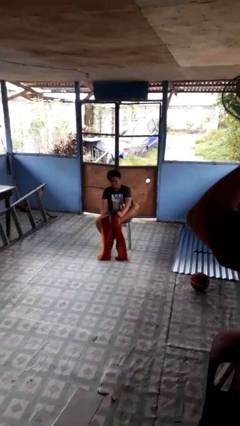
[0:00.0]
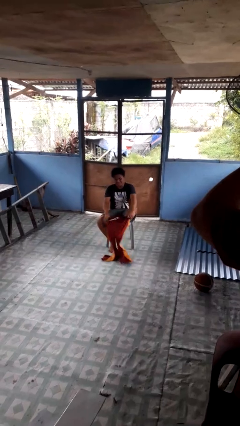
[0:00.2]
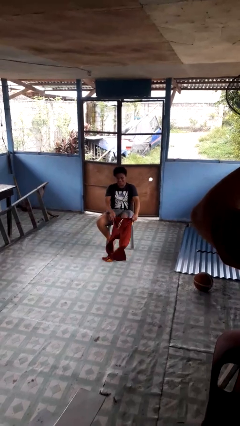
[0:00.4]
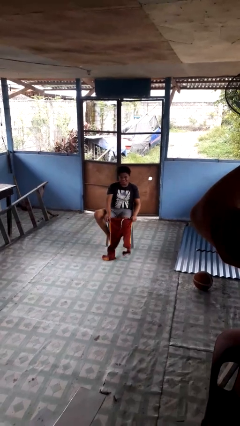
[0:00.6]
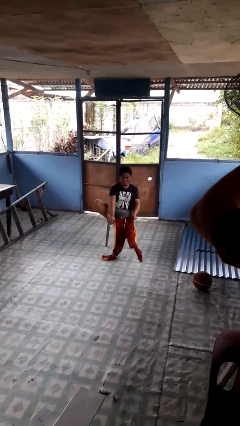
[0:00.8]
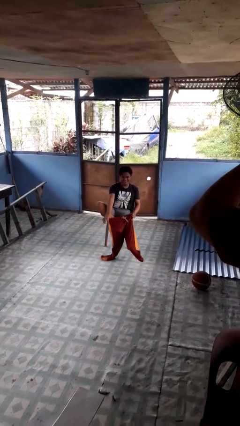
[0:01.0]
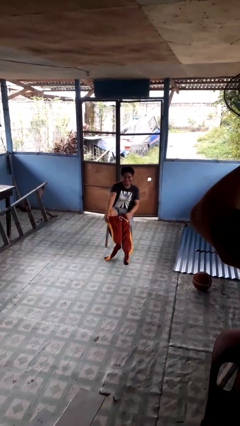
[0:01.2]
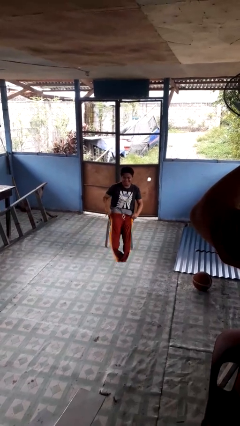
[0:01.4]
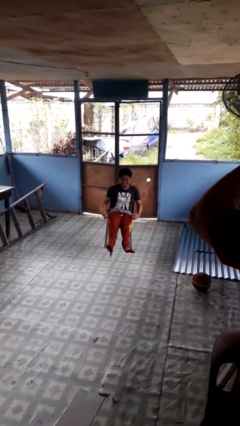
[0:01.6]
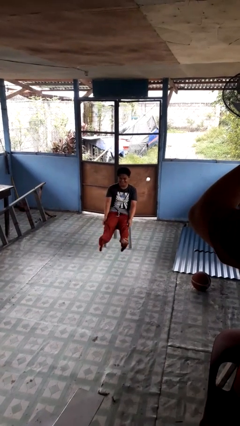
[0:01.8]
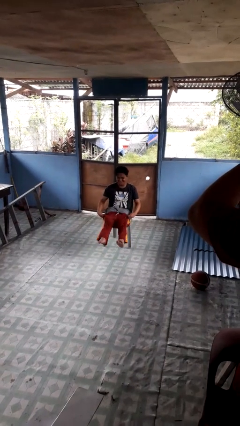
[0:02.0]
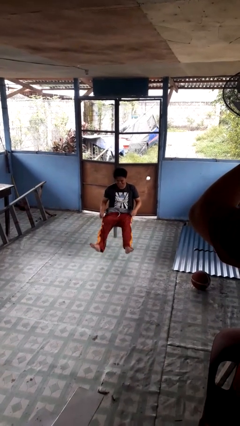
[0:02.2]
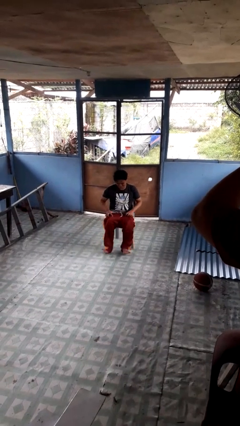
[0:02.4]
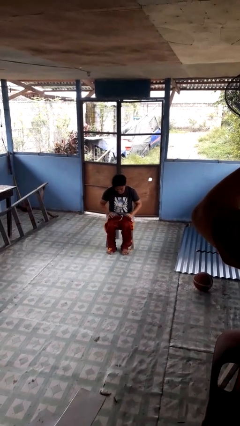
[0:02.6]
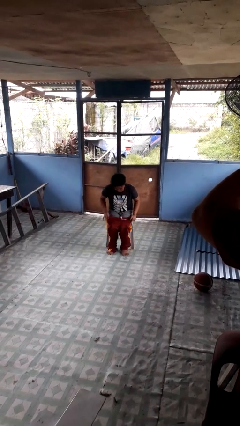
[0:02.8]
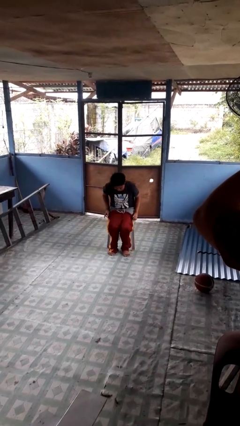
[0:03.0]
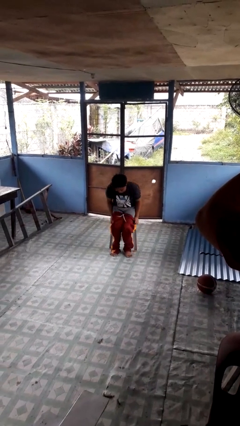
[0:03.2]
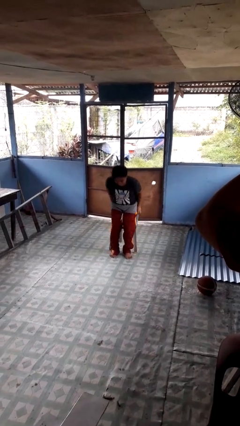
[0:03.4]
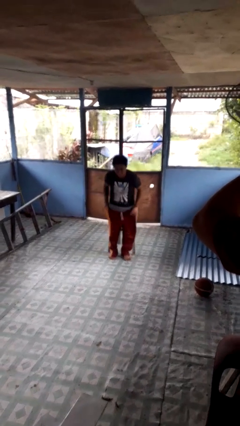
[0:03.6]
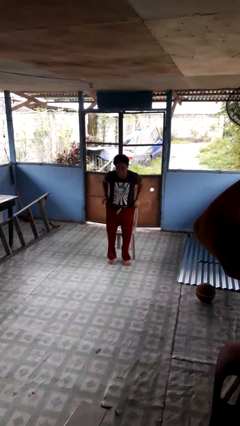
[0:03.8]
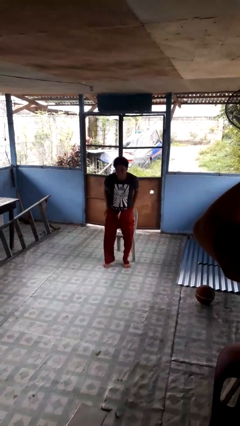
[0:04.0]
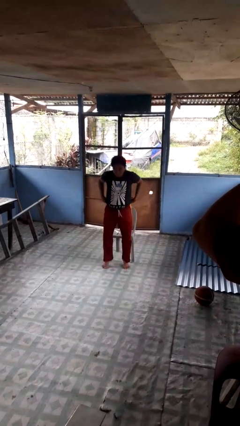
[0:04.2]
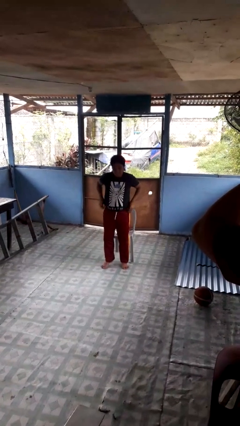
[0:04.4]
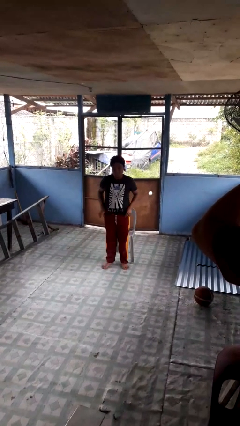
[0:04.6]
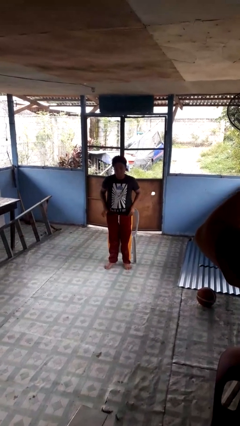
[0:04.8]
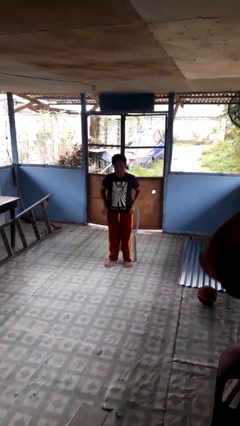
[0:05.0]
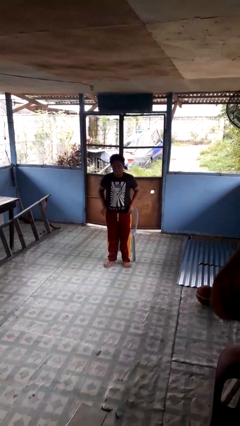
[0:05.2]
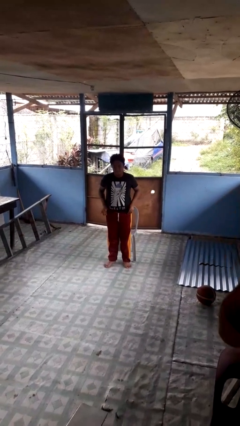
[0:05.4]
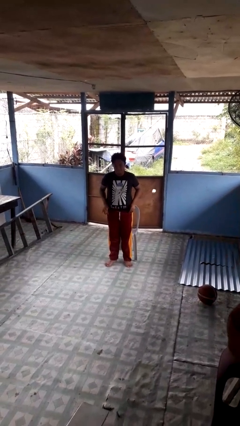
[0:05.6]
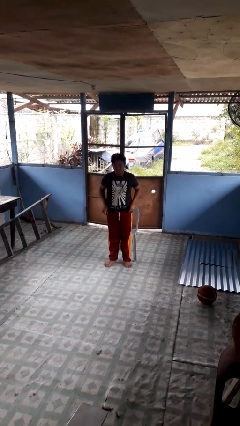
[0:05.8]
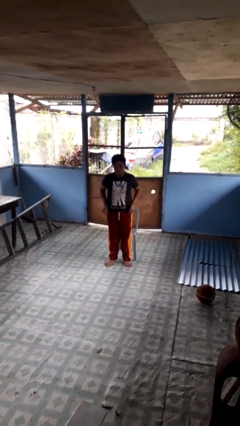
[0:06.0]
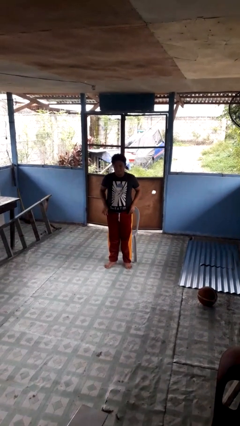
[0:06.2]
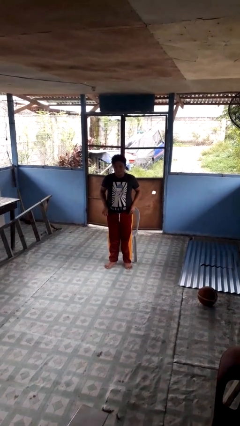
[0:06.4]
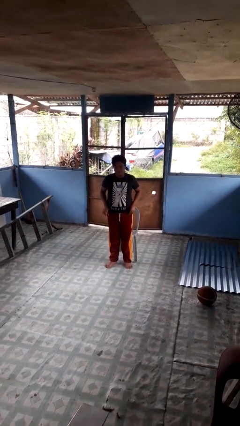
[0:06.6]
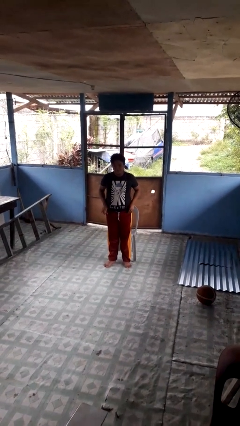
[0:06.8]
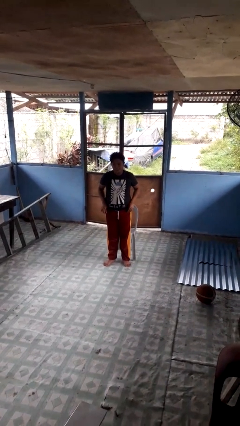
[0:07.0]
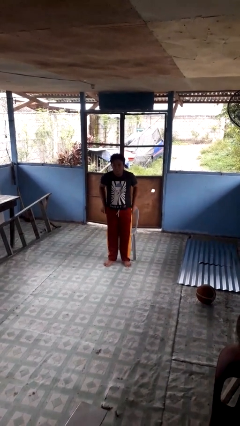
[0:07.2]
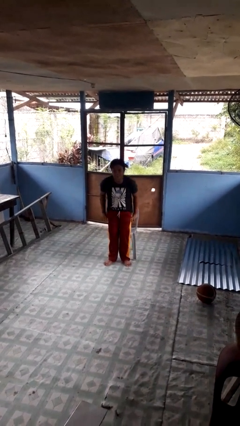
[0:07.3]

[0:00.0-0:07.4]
person puts on pants

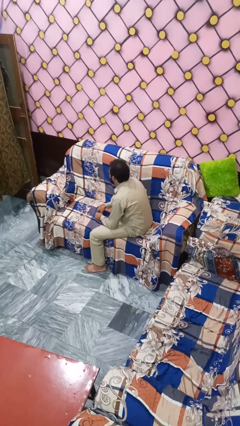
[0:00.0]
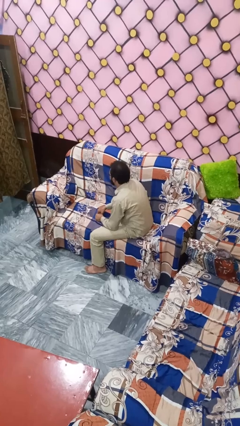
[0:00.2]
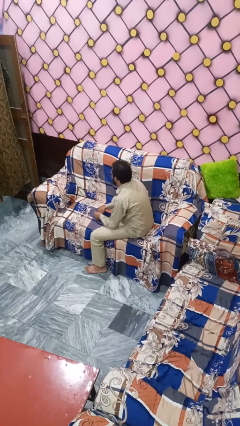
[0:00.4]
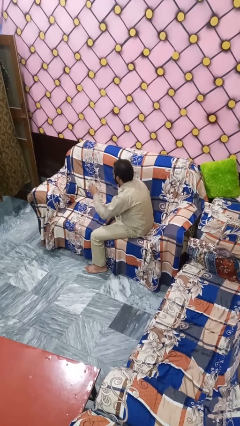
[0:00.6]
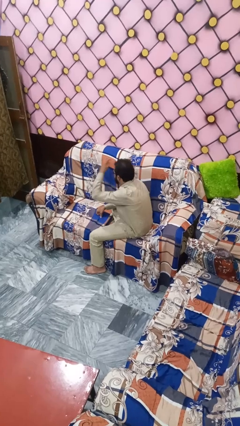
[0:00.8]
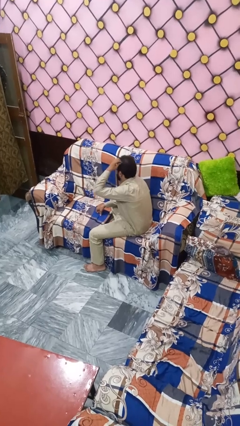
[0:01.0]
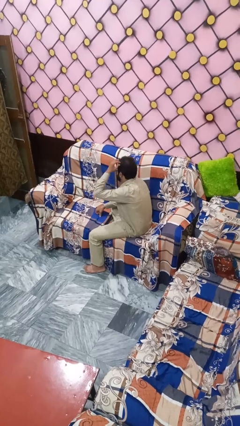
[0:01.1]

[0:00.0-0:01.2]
person strokes hair

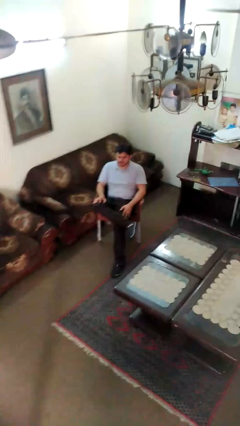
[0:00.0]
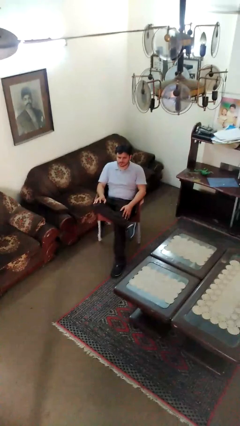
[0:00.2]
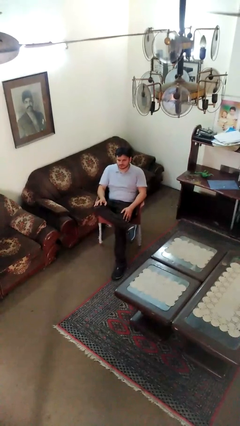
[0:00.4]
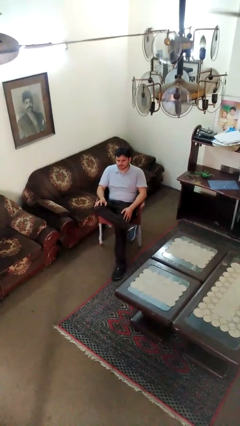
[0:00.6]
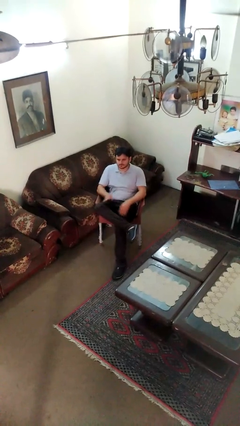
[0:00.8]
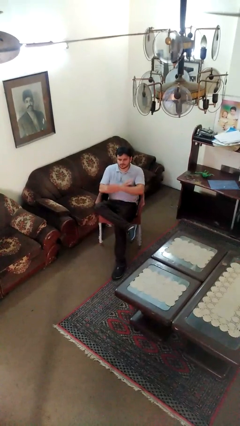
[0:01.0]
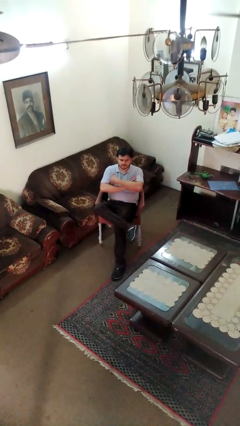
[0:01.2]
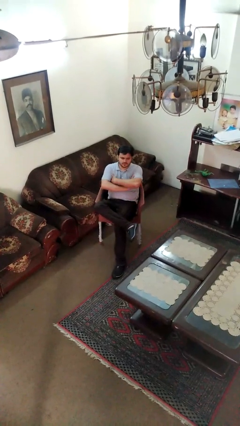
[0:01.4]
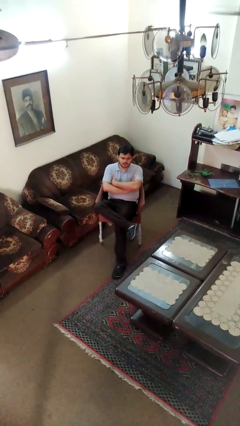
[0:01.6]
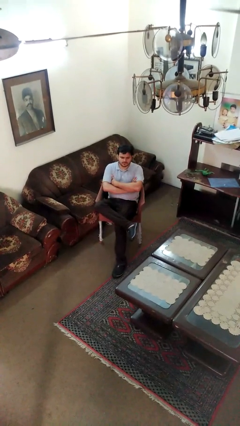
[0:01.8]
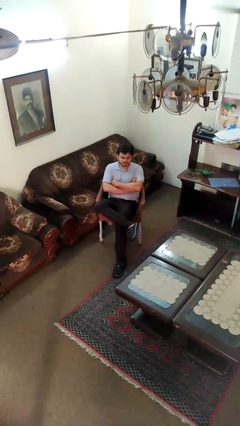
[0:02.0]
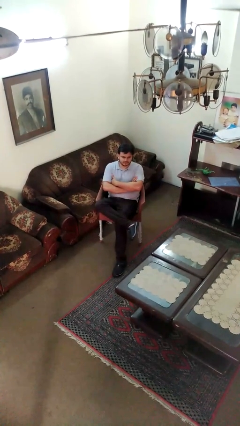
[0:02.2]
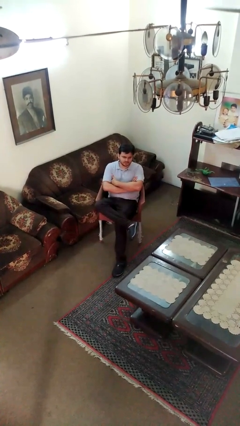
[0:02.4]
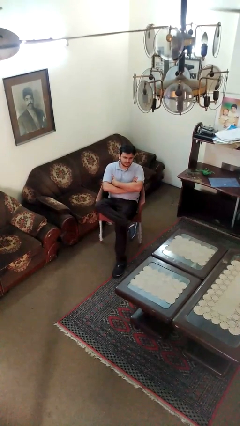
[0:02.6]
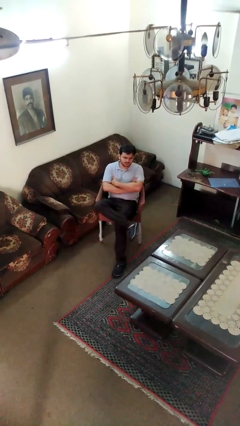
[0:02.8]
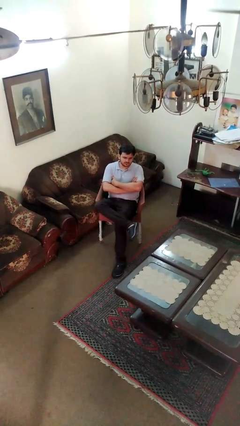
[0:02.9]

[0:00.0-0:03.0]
person crosses arms

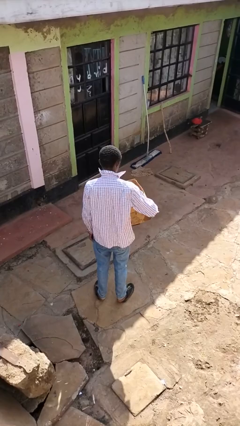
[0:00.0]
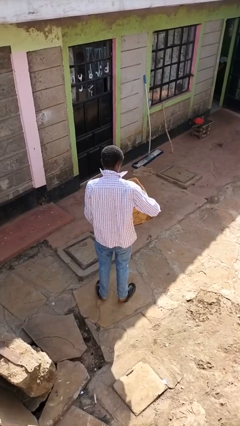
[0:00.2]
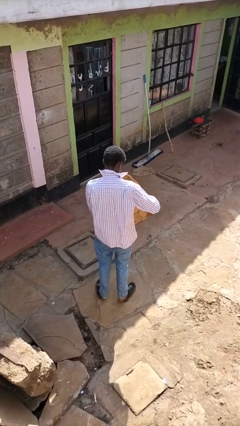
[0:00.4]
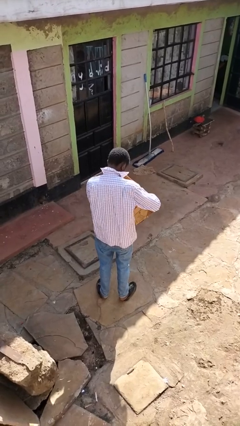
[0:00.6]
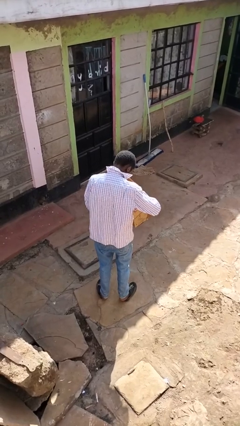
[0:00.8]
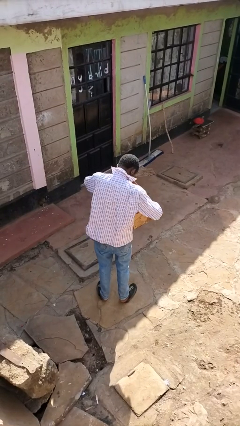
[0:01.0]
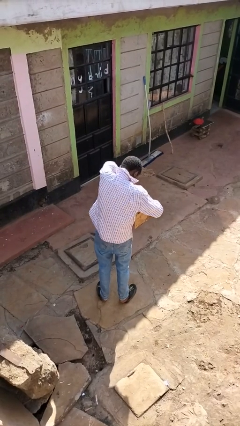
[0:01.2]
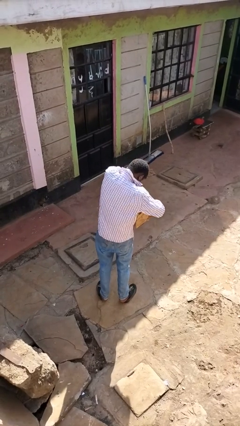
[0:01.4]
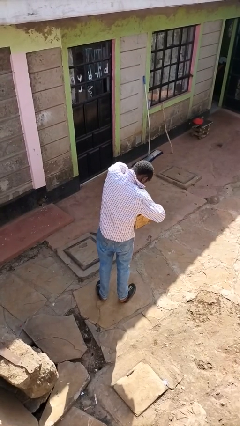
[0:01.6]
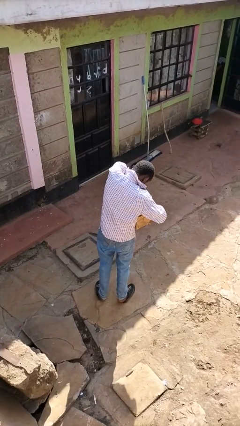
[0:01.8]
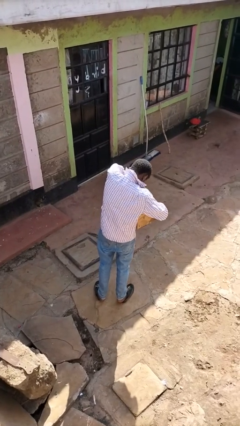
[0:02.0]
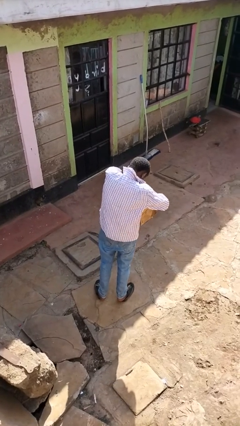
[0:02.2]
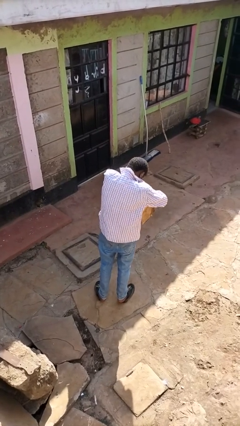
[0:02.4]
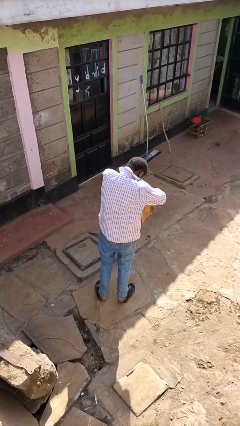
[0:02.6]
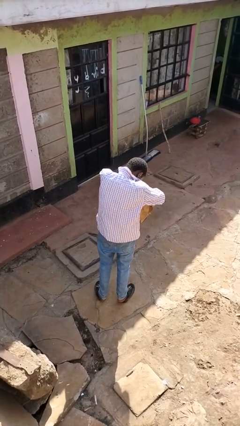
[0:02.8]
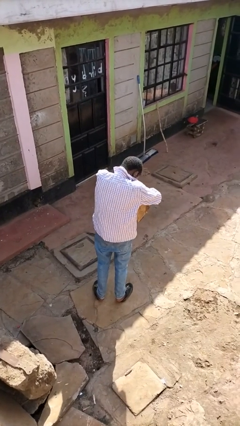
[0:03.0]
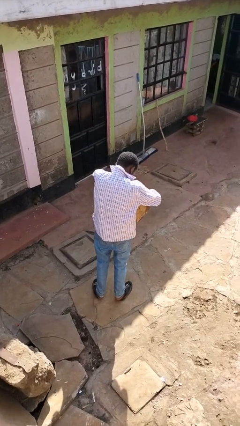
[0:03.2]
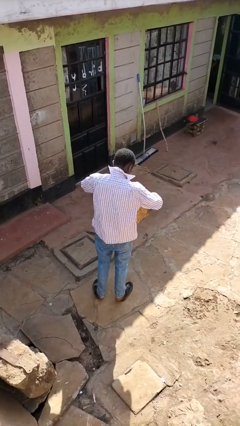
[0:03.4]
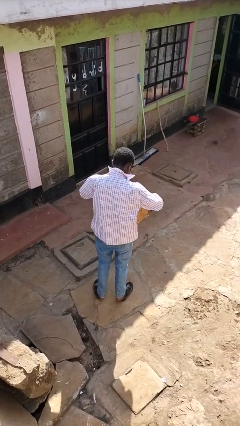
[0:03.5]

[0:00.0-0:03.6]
person searches in box

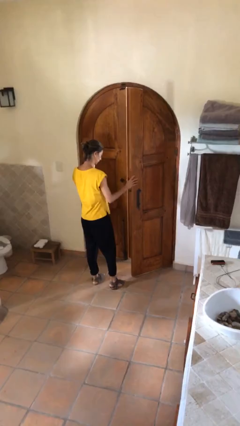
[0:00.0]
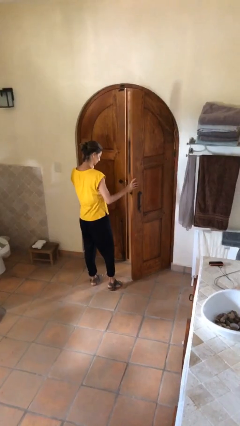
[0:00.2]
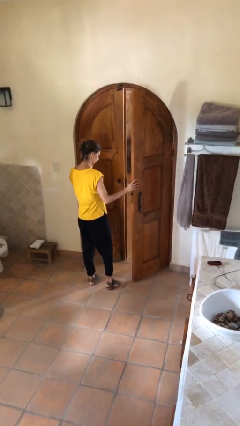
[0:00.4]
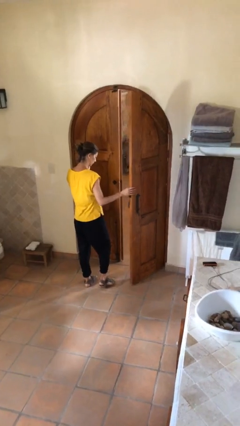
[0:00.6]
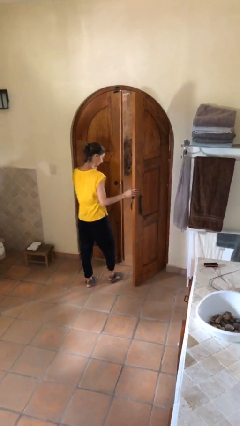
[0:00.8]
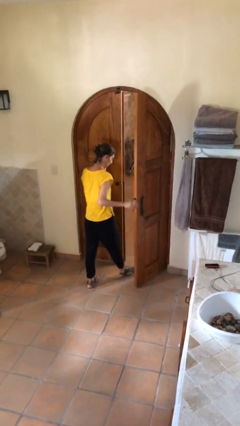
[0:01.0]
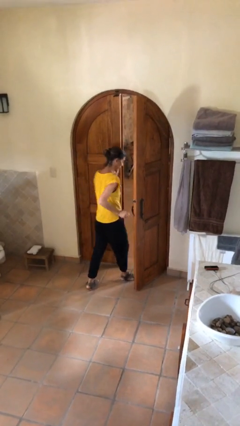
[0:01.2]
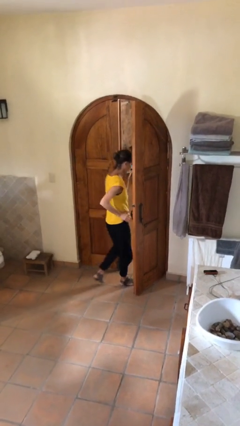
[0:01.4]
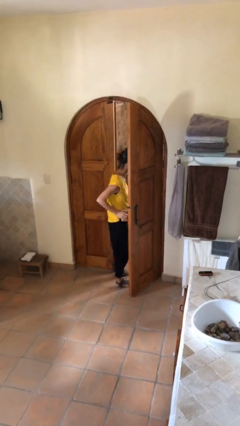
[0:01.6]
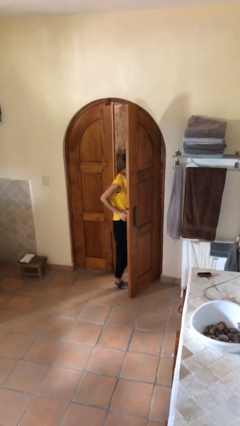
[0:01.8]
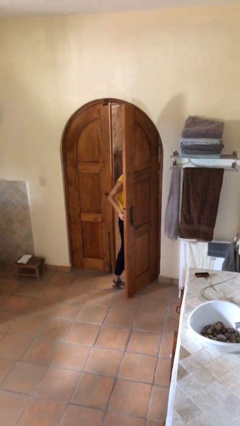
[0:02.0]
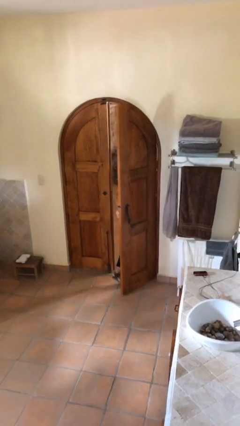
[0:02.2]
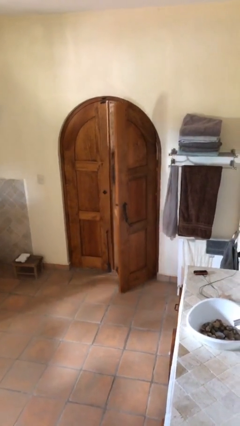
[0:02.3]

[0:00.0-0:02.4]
person exits scene through structure

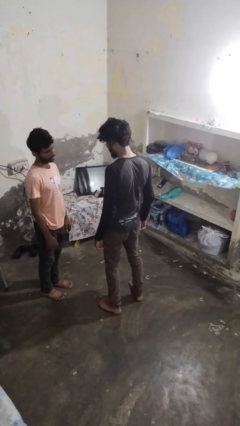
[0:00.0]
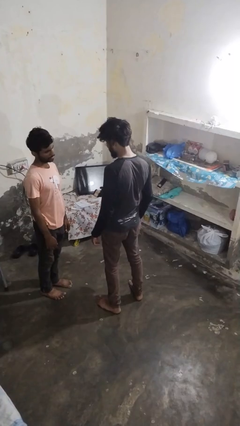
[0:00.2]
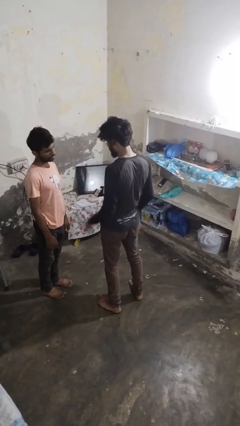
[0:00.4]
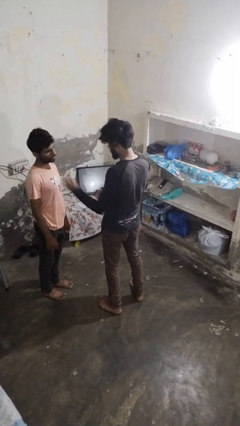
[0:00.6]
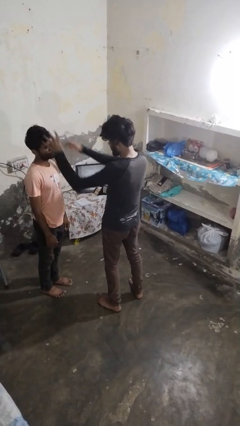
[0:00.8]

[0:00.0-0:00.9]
person grabs person by hair
